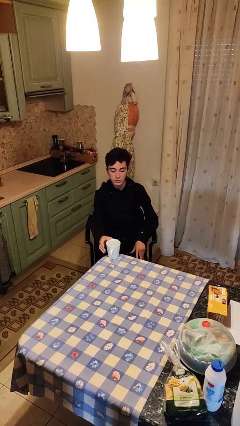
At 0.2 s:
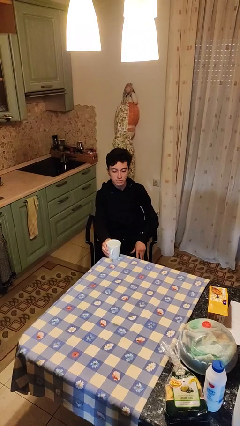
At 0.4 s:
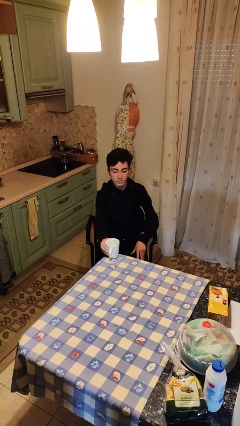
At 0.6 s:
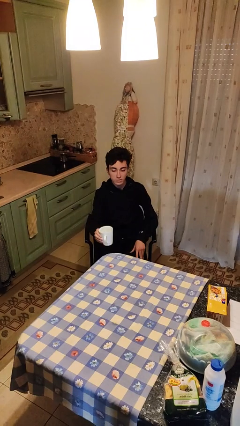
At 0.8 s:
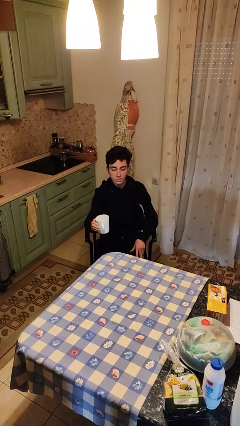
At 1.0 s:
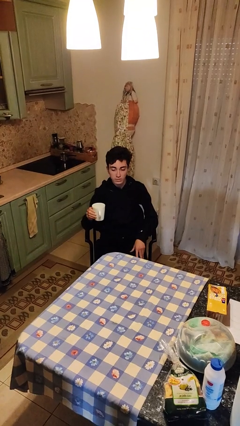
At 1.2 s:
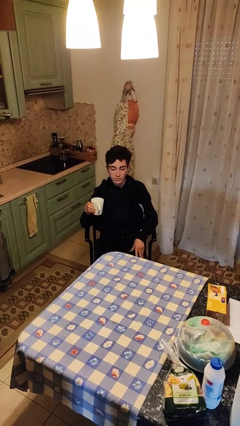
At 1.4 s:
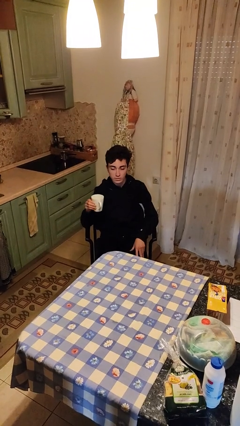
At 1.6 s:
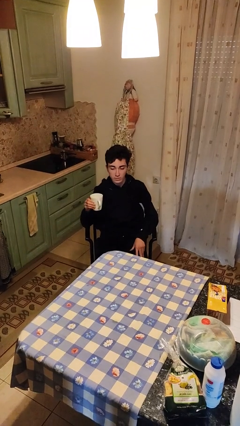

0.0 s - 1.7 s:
person picks up object from table

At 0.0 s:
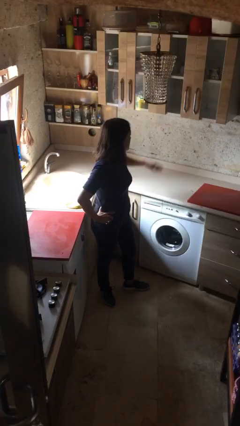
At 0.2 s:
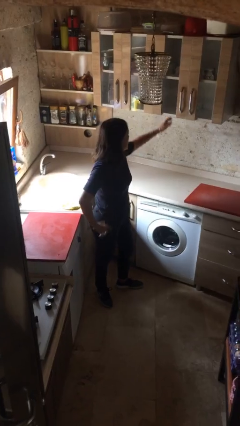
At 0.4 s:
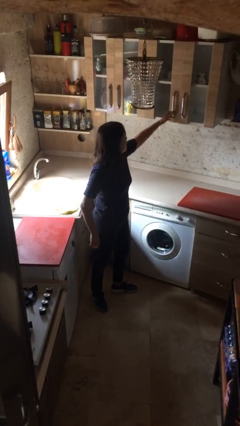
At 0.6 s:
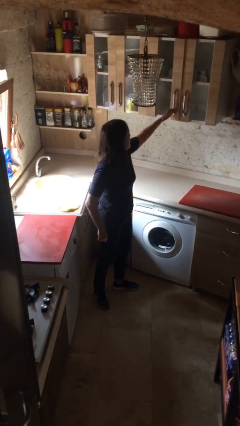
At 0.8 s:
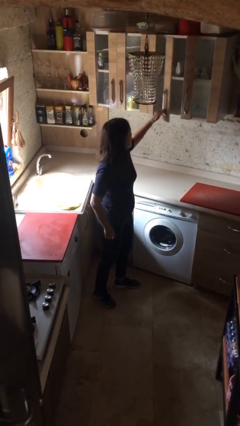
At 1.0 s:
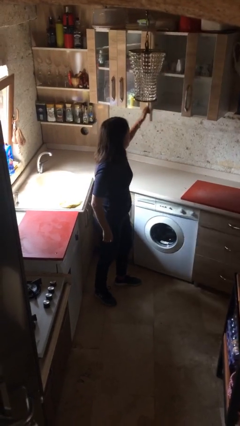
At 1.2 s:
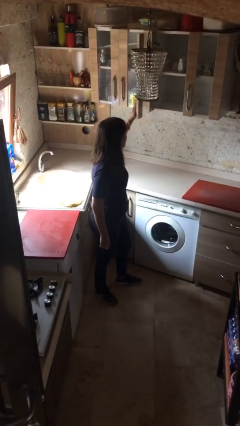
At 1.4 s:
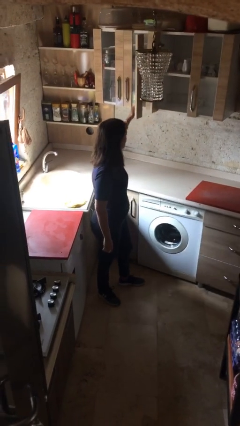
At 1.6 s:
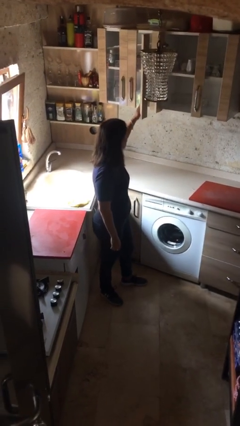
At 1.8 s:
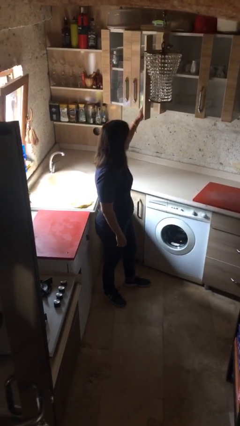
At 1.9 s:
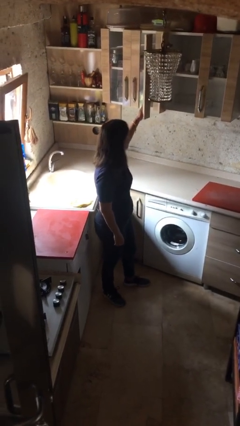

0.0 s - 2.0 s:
person opens cabinet

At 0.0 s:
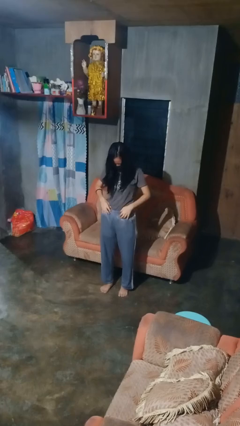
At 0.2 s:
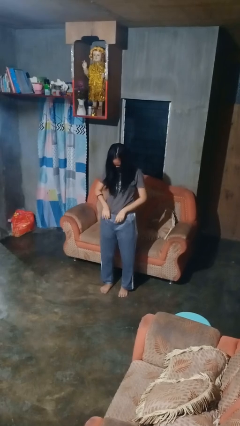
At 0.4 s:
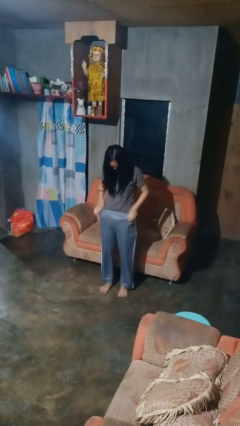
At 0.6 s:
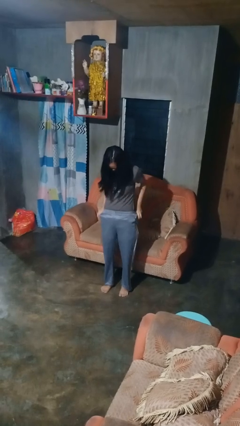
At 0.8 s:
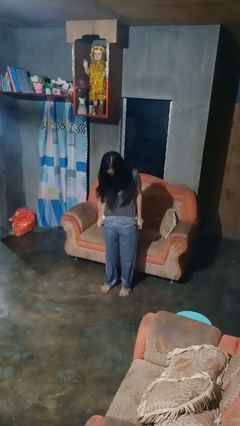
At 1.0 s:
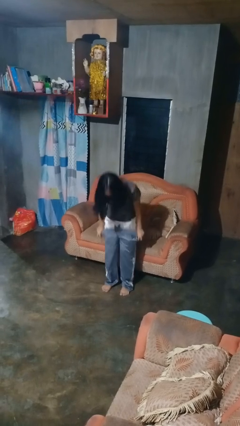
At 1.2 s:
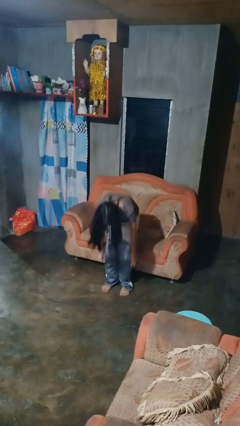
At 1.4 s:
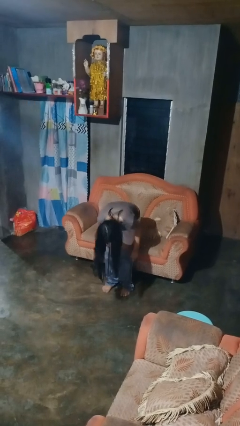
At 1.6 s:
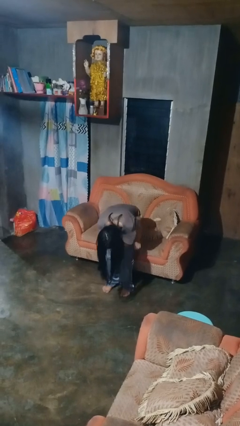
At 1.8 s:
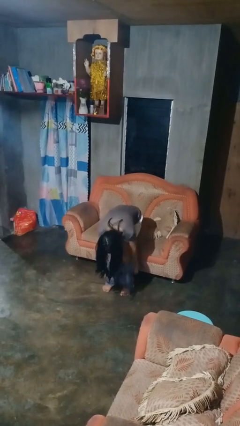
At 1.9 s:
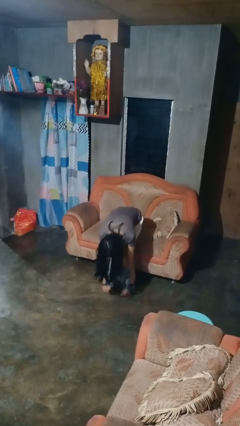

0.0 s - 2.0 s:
person takes off pants

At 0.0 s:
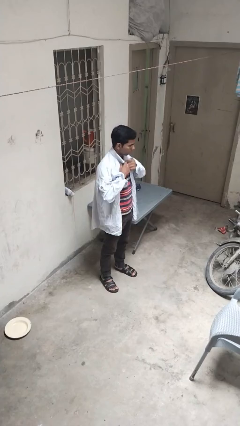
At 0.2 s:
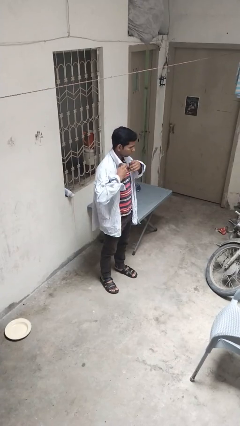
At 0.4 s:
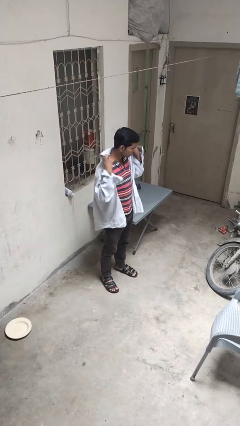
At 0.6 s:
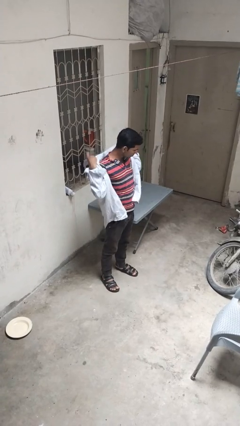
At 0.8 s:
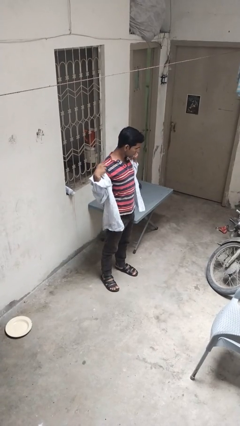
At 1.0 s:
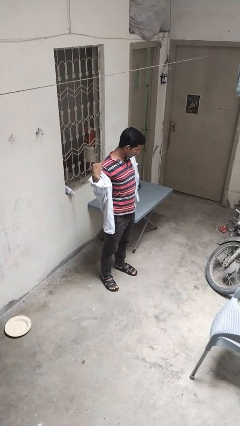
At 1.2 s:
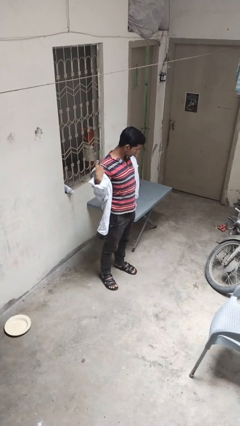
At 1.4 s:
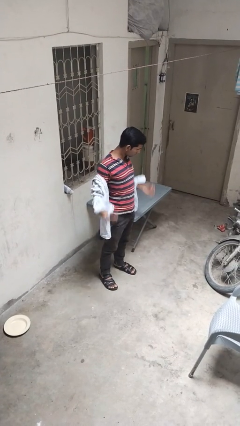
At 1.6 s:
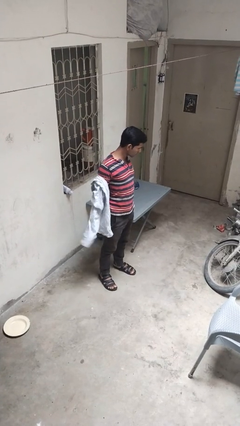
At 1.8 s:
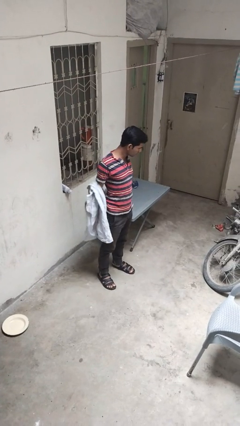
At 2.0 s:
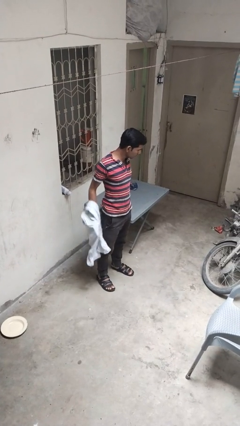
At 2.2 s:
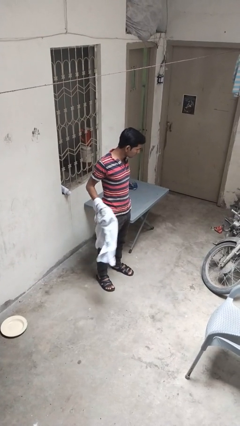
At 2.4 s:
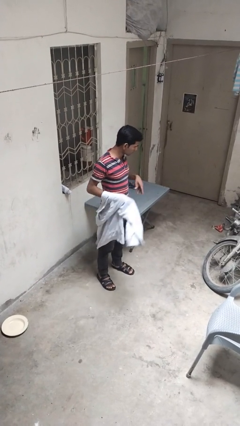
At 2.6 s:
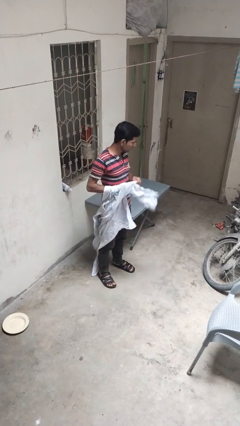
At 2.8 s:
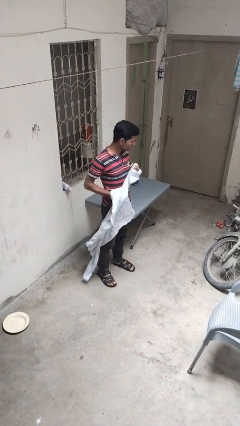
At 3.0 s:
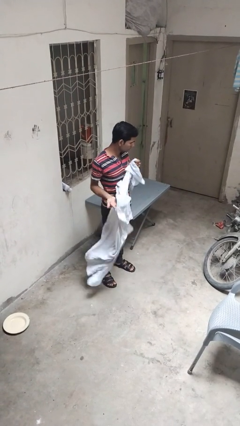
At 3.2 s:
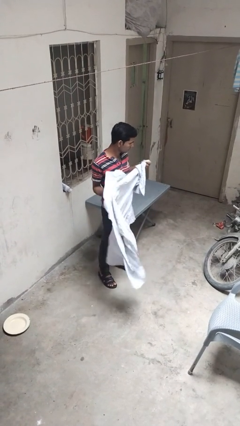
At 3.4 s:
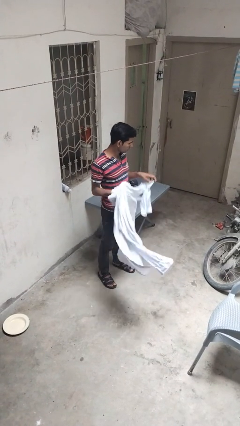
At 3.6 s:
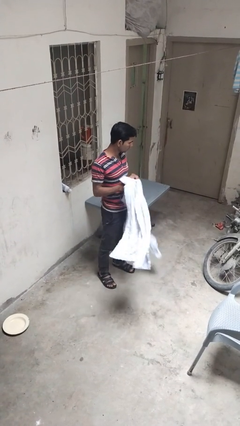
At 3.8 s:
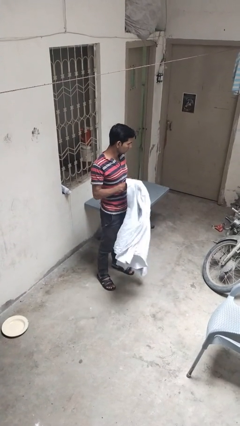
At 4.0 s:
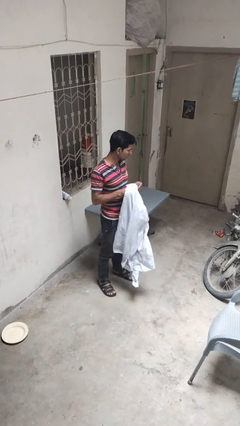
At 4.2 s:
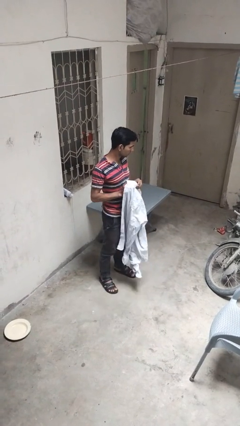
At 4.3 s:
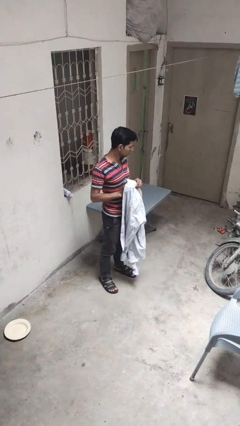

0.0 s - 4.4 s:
person takes off shirt

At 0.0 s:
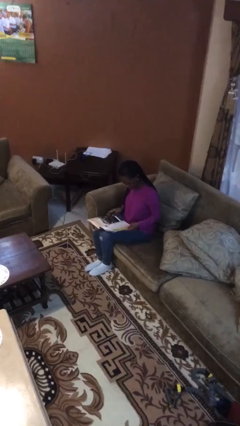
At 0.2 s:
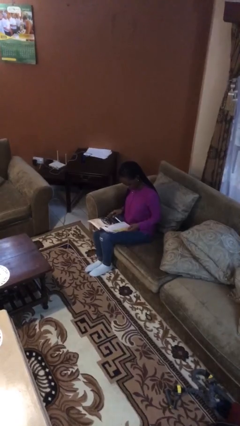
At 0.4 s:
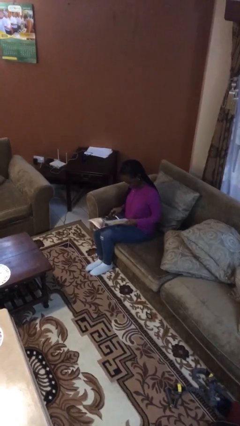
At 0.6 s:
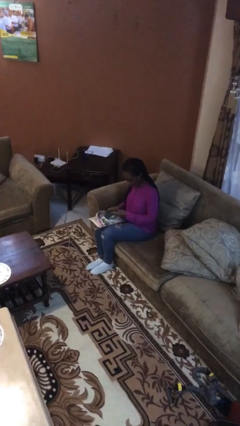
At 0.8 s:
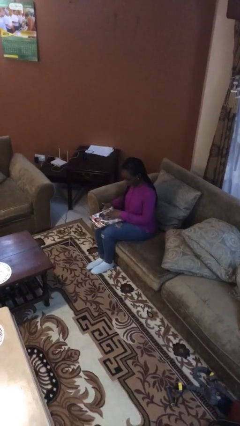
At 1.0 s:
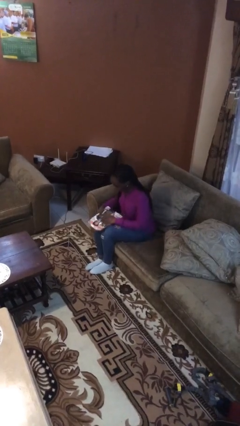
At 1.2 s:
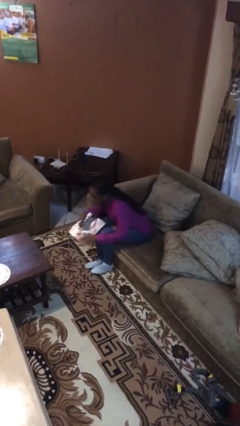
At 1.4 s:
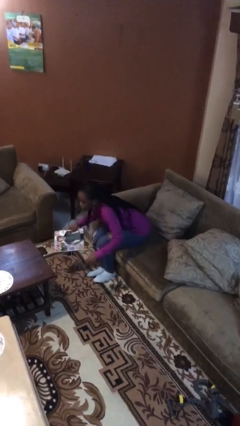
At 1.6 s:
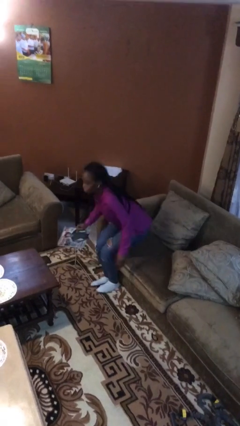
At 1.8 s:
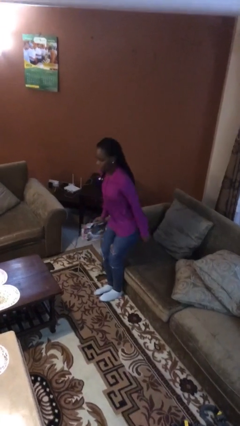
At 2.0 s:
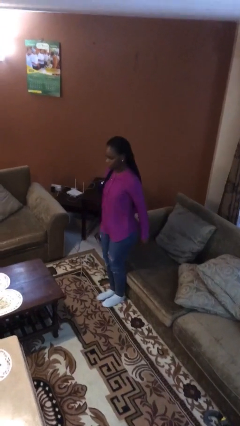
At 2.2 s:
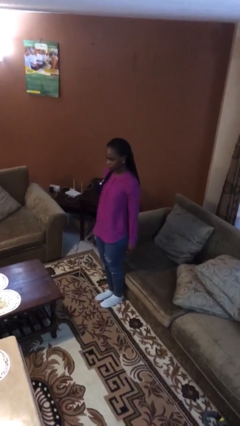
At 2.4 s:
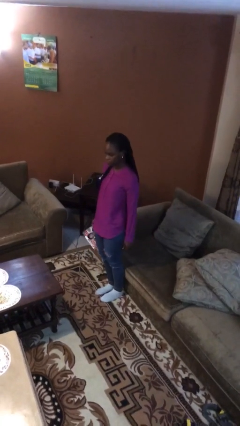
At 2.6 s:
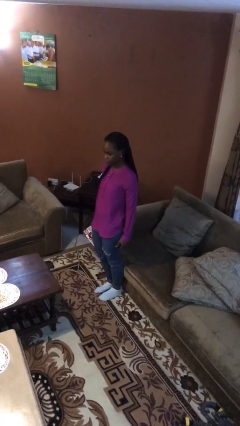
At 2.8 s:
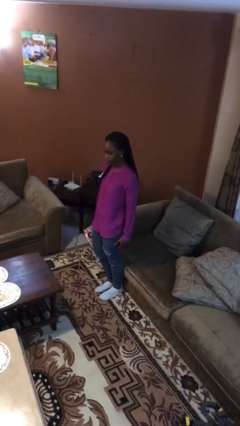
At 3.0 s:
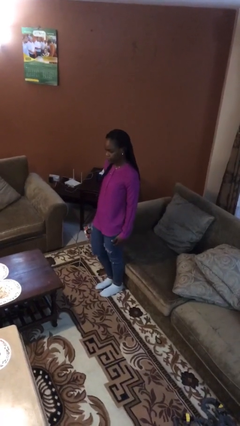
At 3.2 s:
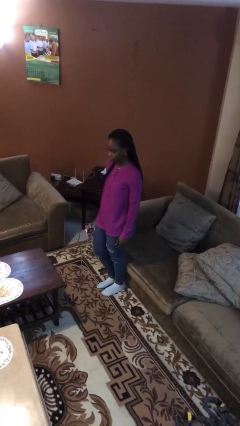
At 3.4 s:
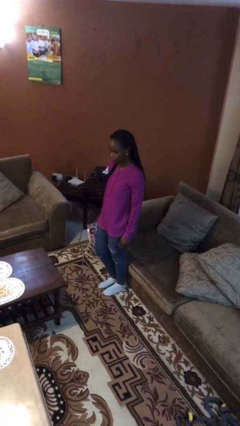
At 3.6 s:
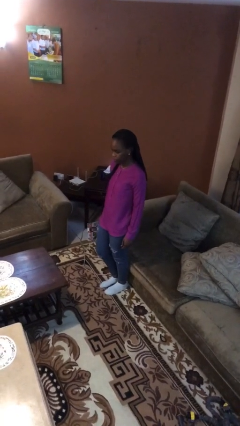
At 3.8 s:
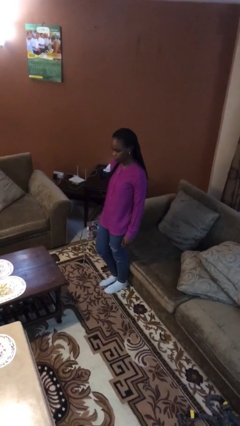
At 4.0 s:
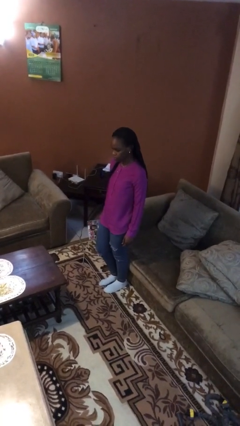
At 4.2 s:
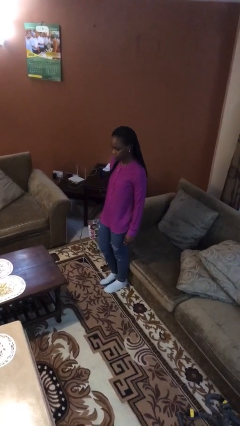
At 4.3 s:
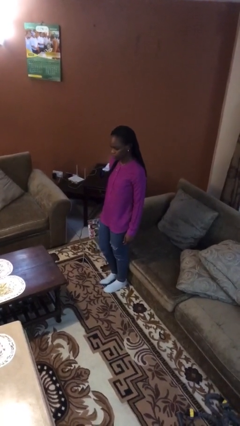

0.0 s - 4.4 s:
person stands up

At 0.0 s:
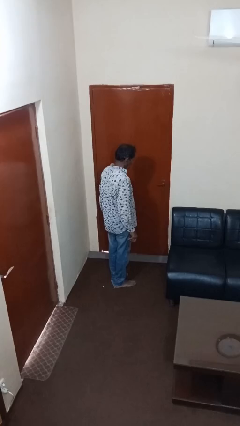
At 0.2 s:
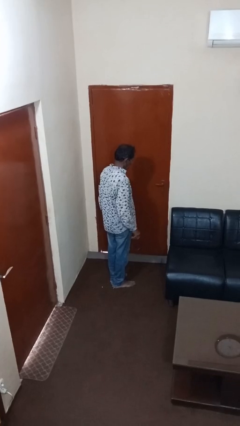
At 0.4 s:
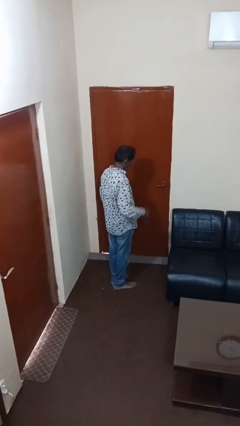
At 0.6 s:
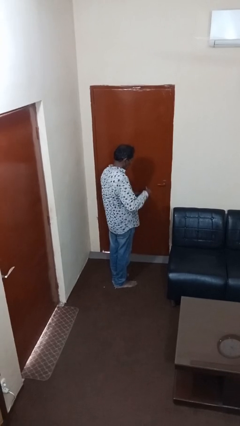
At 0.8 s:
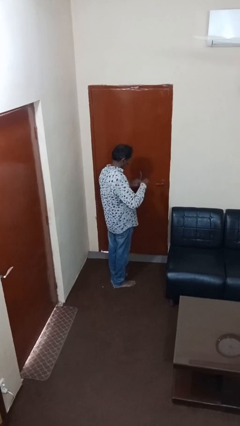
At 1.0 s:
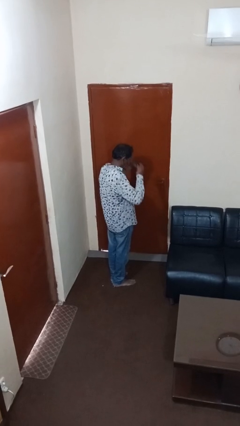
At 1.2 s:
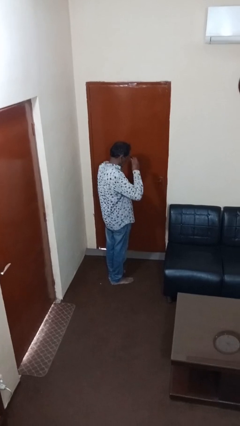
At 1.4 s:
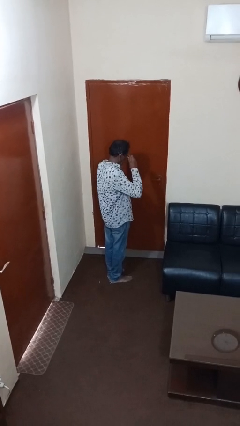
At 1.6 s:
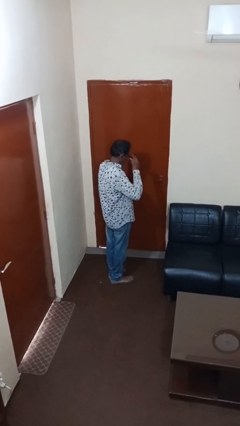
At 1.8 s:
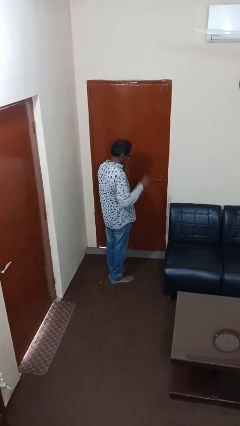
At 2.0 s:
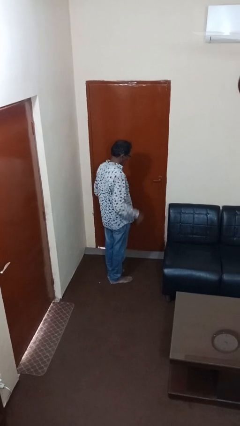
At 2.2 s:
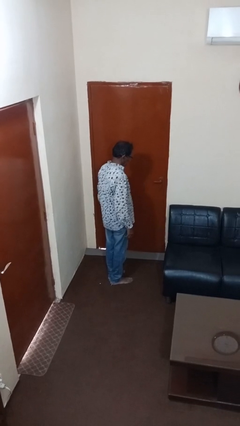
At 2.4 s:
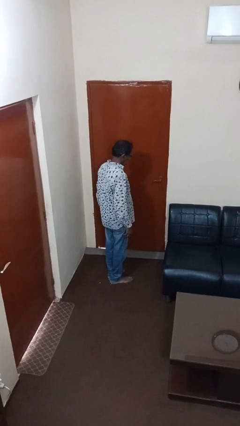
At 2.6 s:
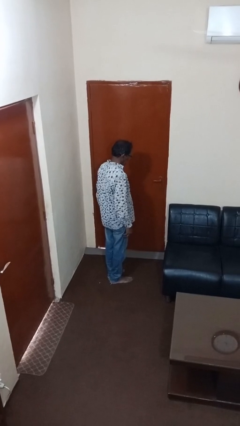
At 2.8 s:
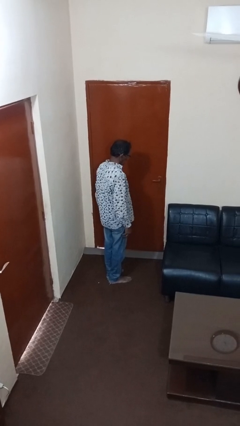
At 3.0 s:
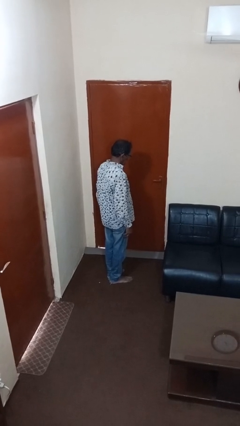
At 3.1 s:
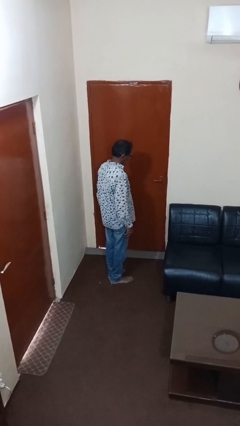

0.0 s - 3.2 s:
person puts on glasses
